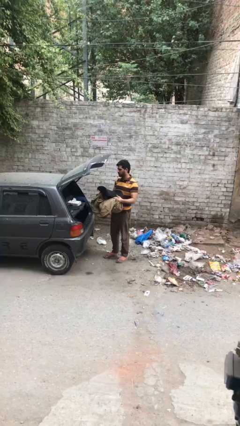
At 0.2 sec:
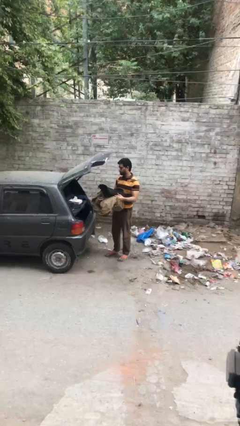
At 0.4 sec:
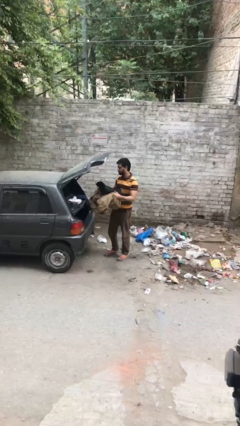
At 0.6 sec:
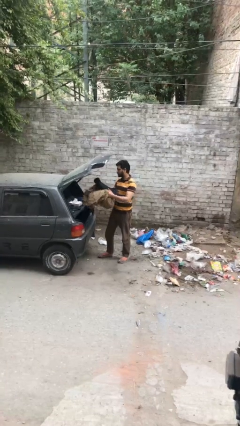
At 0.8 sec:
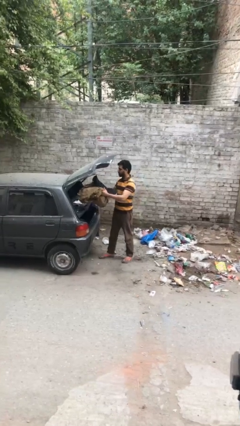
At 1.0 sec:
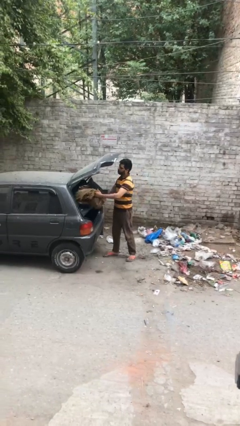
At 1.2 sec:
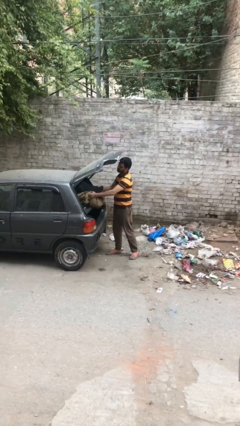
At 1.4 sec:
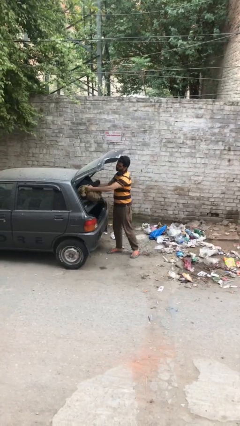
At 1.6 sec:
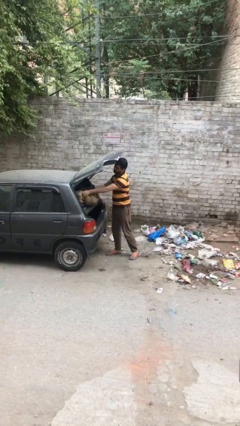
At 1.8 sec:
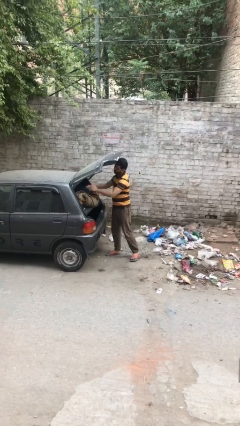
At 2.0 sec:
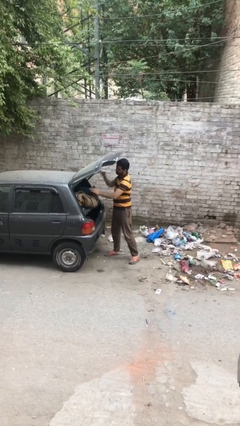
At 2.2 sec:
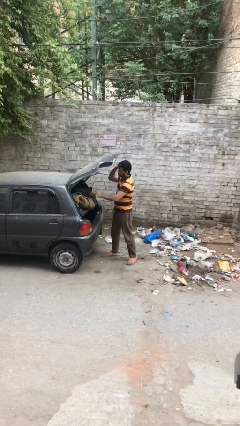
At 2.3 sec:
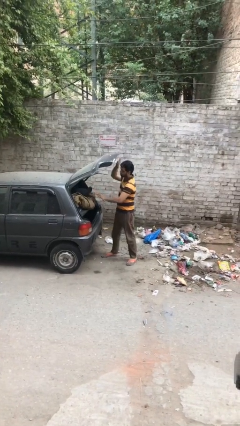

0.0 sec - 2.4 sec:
person loads car

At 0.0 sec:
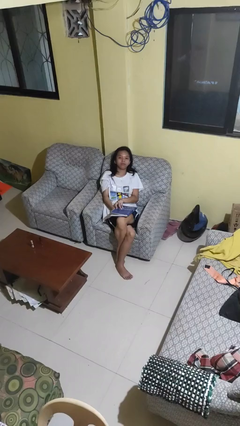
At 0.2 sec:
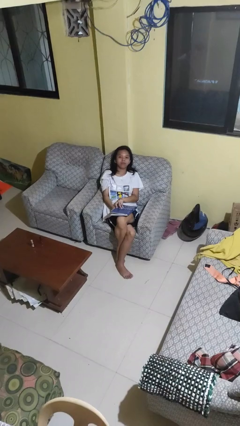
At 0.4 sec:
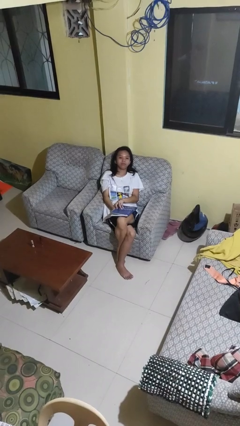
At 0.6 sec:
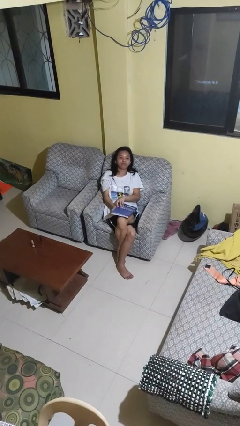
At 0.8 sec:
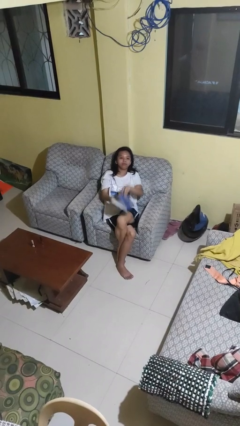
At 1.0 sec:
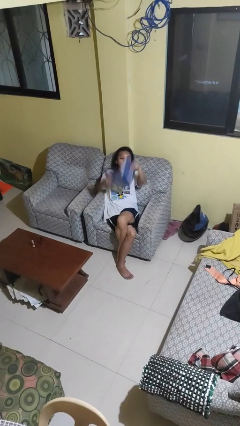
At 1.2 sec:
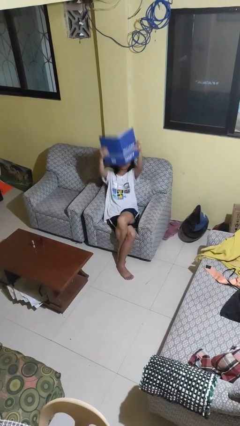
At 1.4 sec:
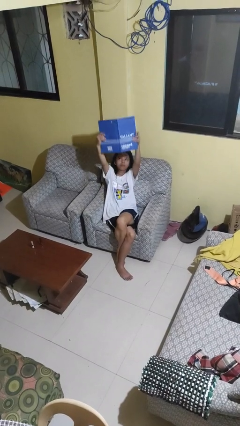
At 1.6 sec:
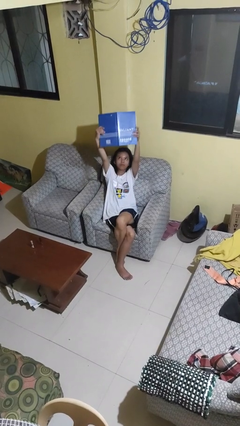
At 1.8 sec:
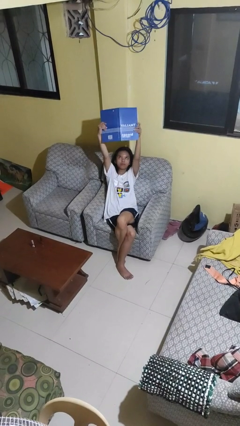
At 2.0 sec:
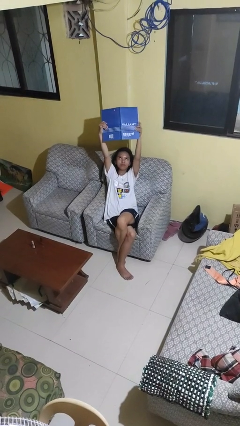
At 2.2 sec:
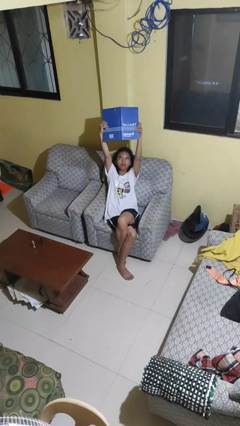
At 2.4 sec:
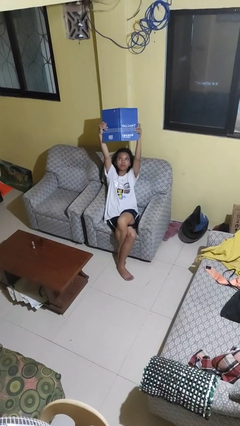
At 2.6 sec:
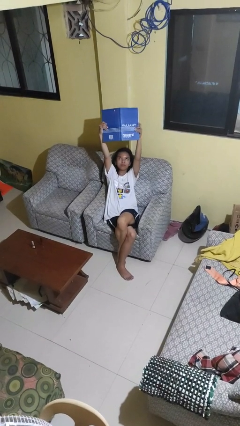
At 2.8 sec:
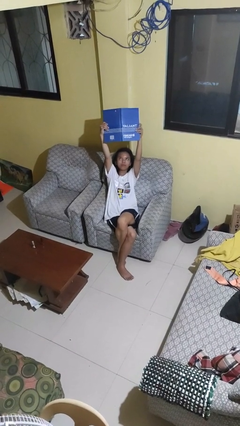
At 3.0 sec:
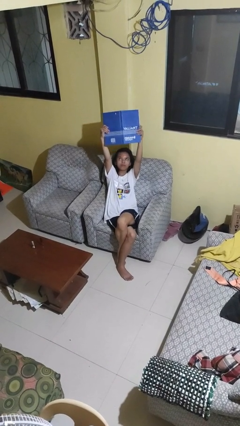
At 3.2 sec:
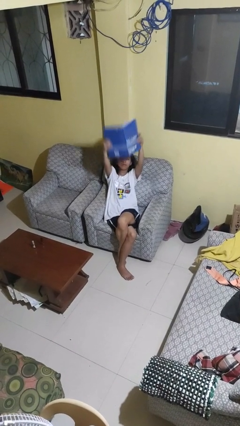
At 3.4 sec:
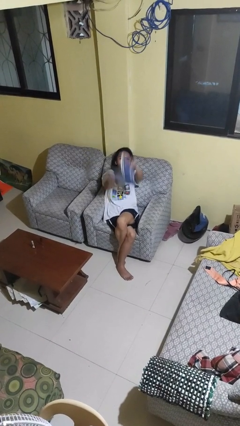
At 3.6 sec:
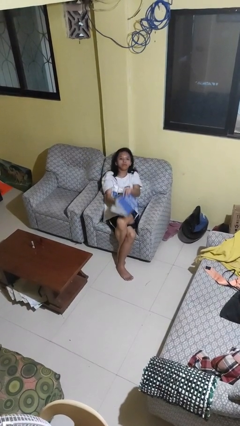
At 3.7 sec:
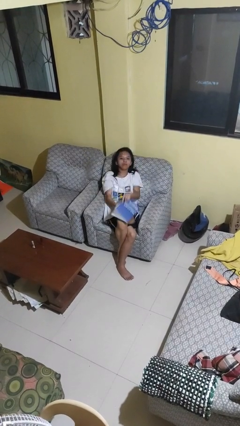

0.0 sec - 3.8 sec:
person holds object above head

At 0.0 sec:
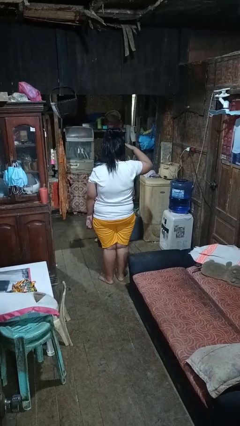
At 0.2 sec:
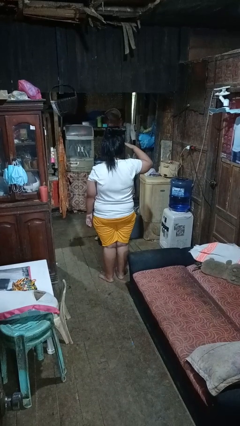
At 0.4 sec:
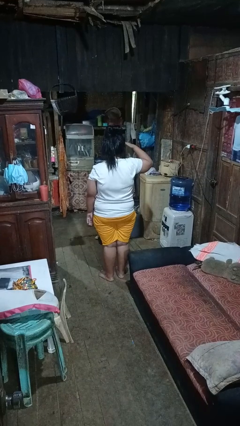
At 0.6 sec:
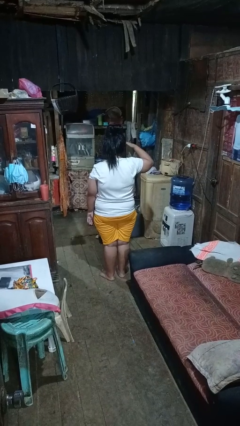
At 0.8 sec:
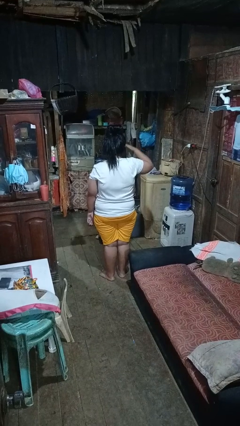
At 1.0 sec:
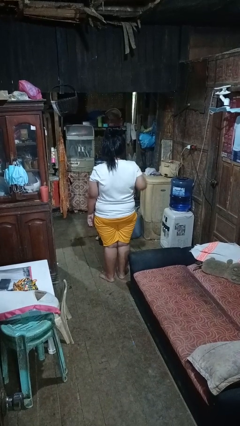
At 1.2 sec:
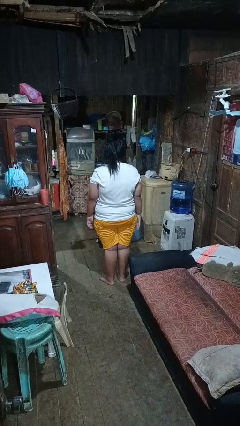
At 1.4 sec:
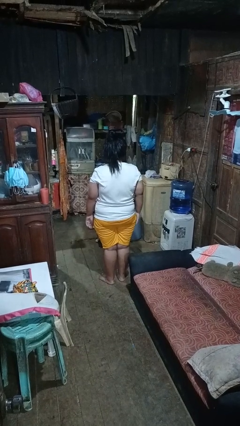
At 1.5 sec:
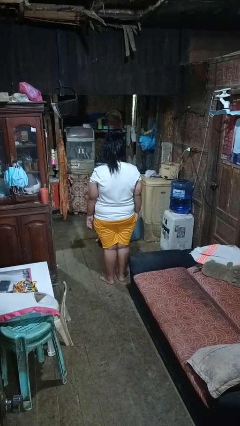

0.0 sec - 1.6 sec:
person salutes

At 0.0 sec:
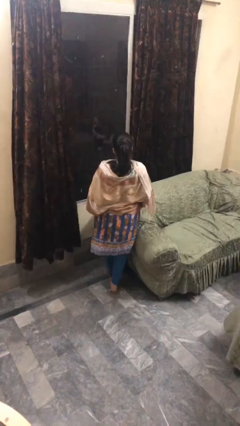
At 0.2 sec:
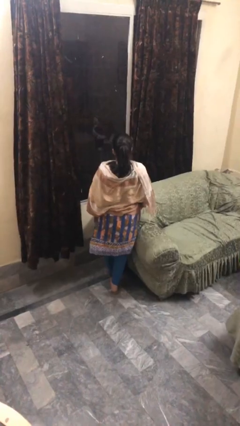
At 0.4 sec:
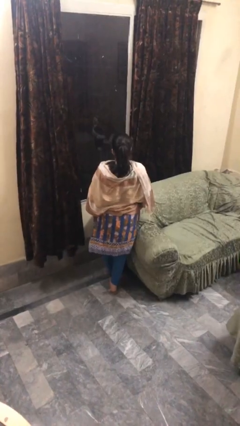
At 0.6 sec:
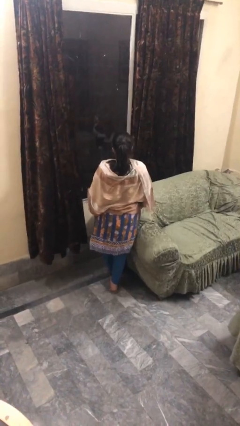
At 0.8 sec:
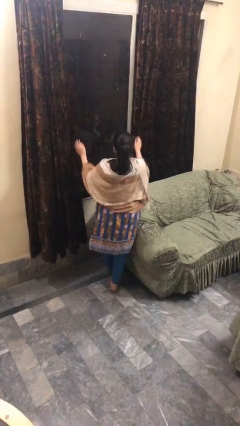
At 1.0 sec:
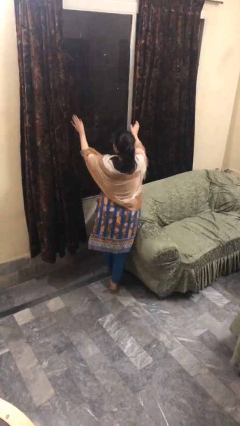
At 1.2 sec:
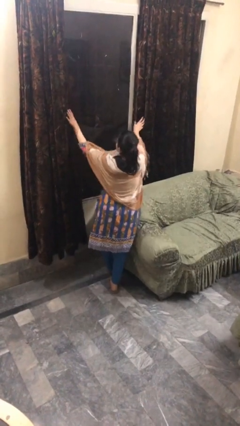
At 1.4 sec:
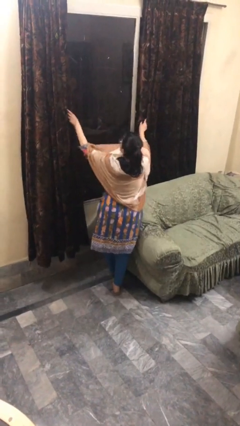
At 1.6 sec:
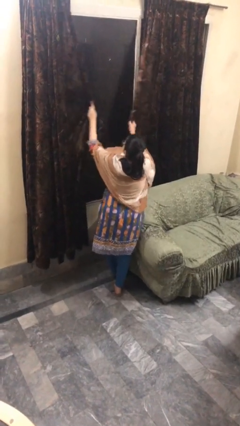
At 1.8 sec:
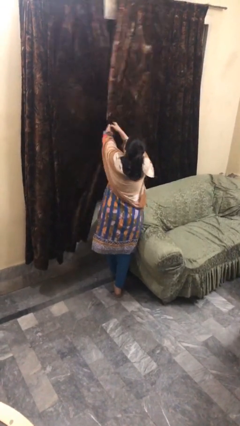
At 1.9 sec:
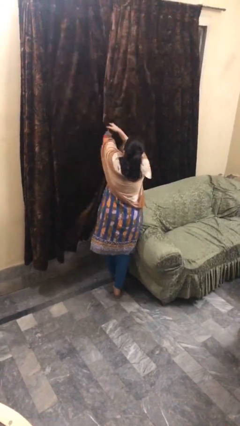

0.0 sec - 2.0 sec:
person closes curtains

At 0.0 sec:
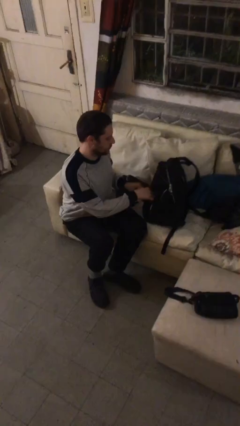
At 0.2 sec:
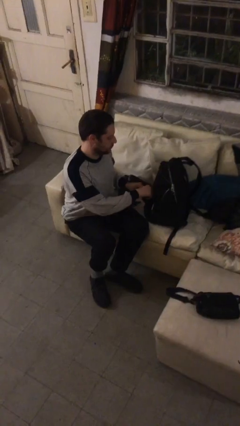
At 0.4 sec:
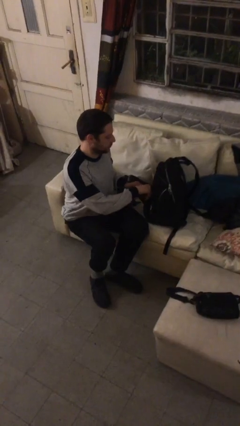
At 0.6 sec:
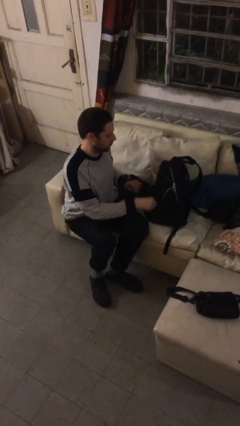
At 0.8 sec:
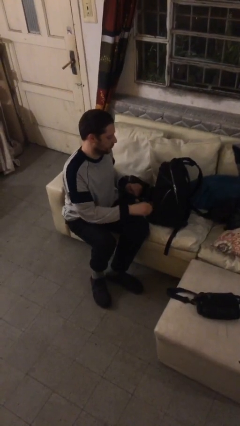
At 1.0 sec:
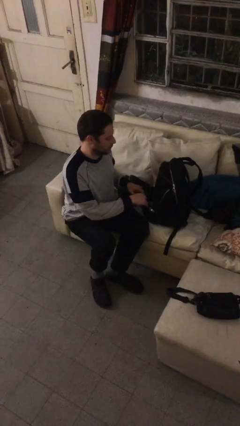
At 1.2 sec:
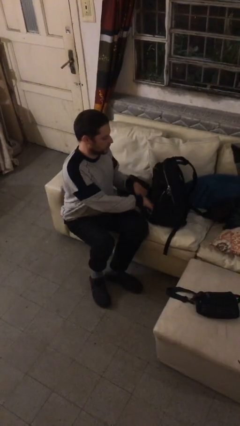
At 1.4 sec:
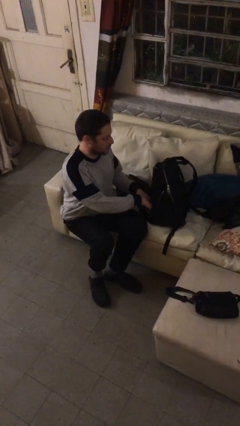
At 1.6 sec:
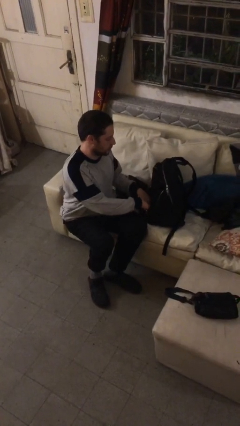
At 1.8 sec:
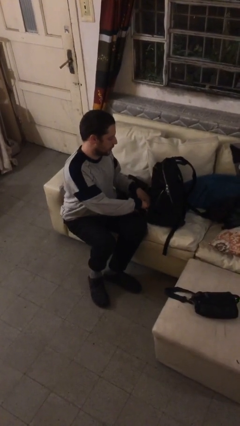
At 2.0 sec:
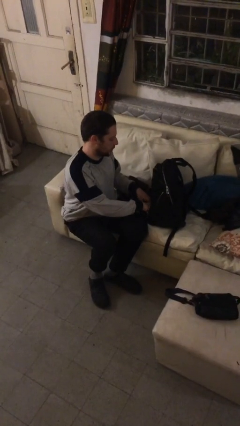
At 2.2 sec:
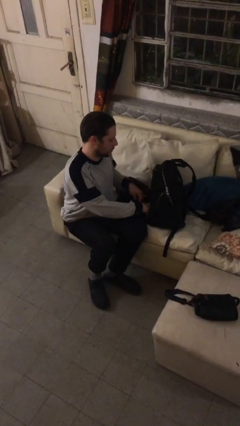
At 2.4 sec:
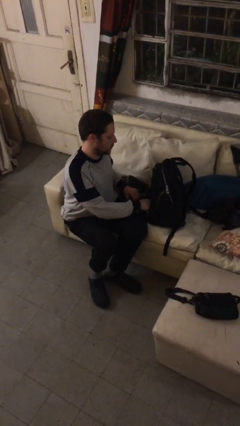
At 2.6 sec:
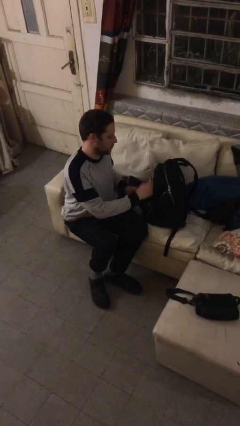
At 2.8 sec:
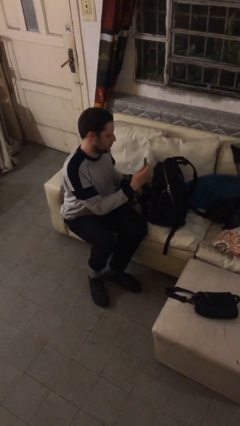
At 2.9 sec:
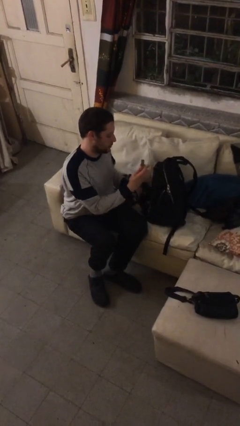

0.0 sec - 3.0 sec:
person searches in backpack

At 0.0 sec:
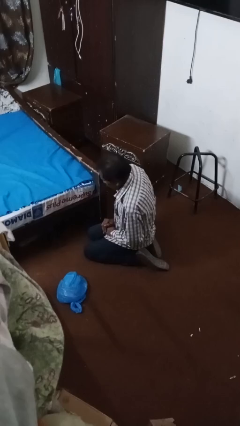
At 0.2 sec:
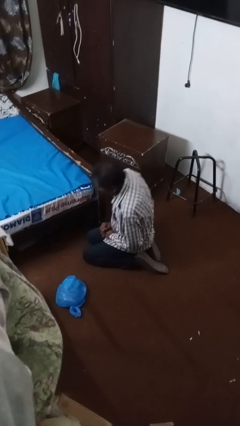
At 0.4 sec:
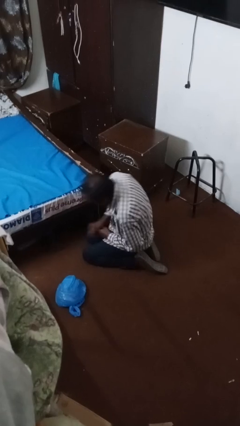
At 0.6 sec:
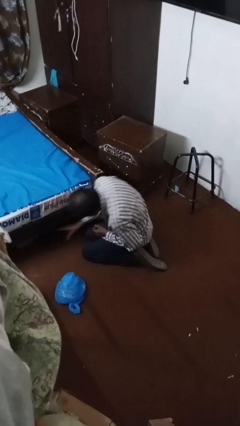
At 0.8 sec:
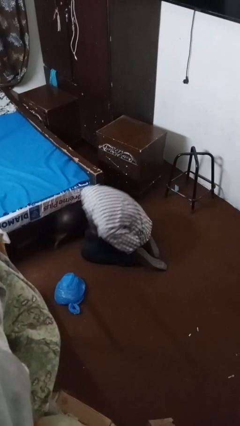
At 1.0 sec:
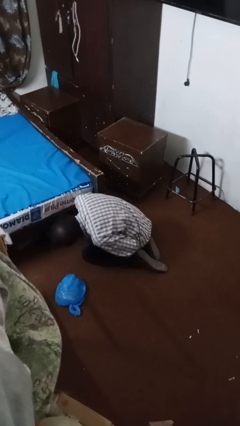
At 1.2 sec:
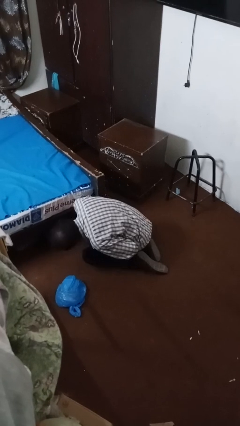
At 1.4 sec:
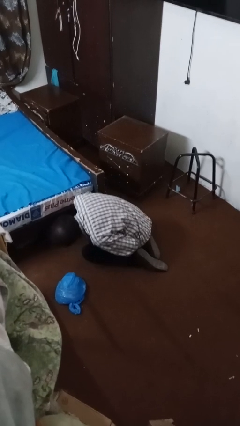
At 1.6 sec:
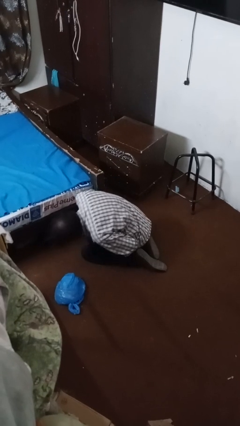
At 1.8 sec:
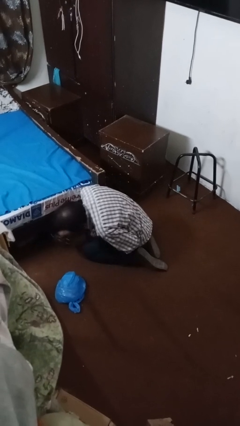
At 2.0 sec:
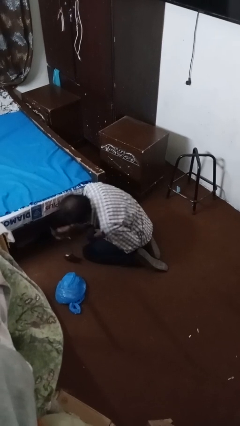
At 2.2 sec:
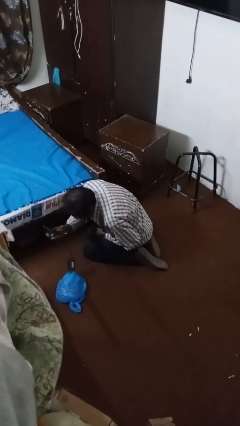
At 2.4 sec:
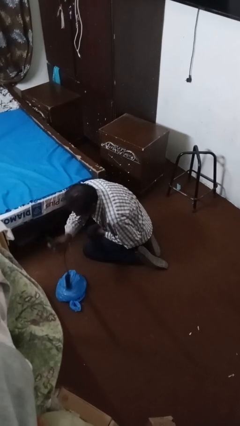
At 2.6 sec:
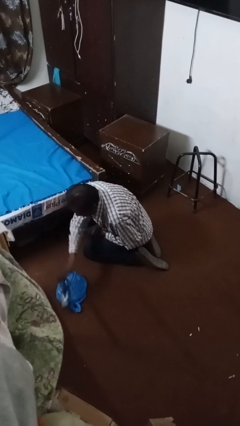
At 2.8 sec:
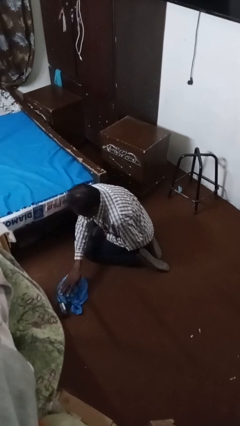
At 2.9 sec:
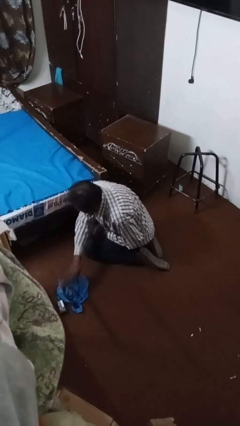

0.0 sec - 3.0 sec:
person searches under bed

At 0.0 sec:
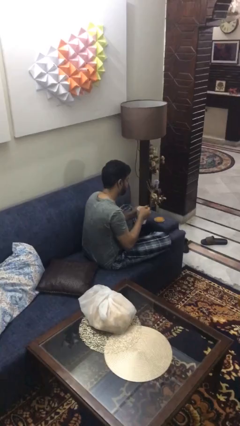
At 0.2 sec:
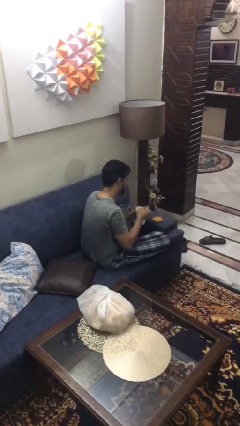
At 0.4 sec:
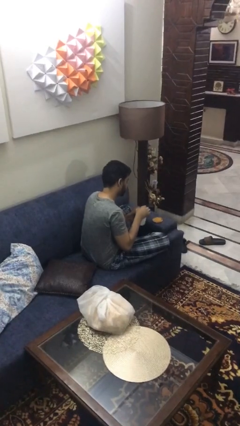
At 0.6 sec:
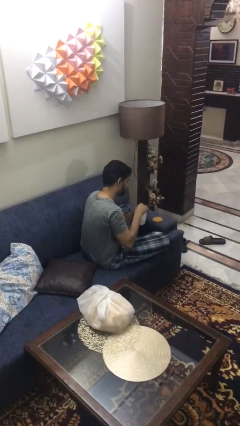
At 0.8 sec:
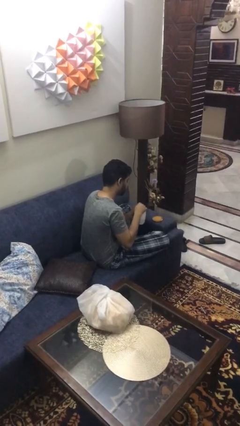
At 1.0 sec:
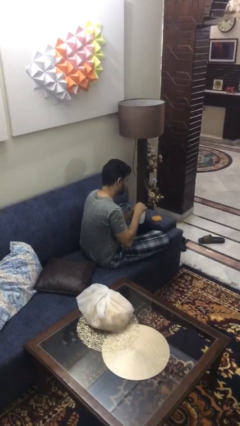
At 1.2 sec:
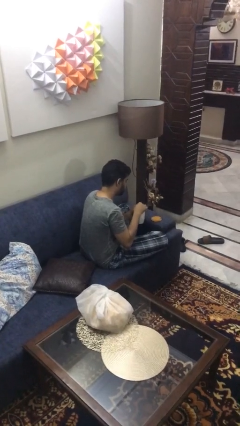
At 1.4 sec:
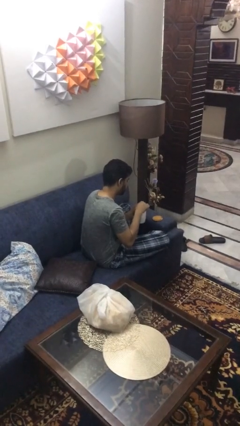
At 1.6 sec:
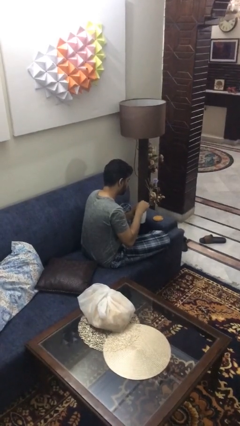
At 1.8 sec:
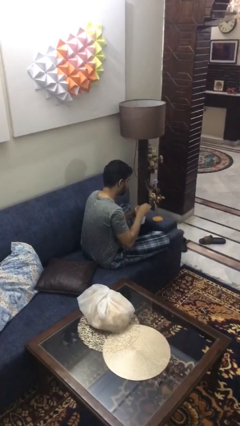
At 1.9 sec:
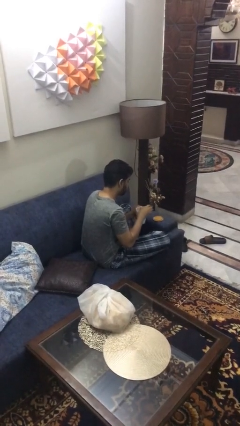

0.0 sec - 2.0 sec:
person stirs mug
